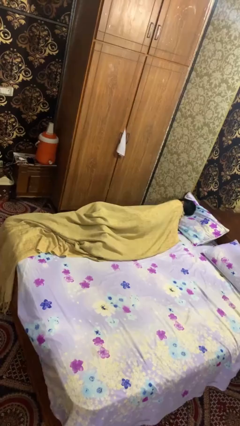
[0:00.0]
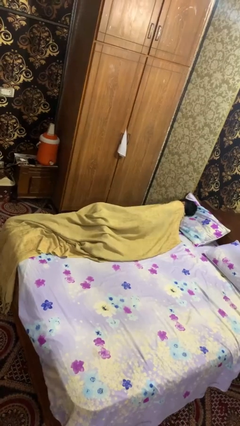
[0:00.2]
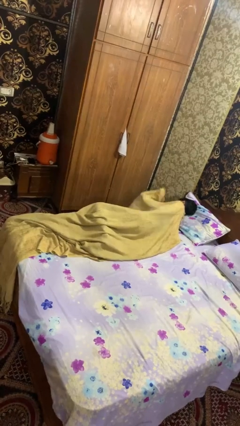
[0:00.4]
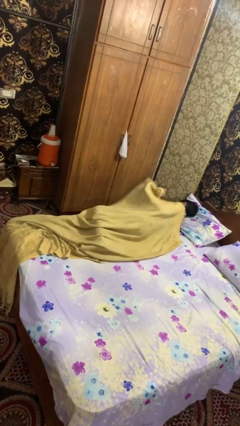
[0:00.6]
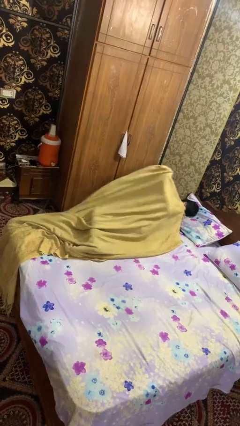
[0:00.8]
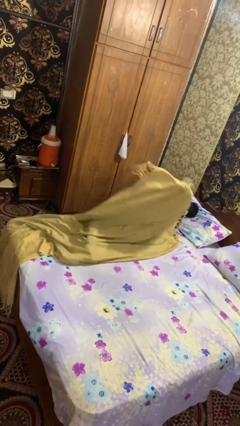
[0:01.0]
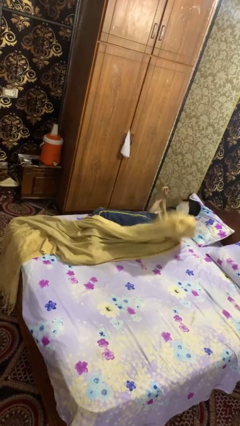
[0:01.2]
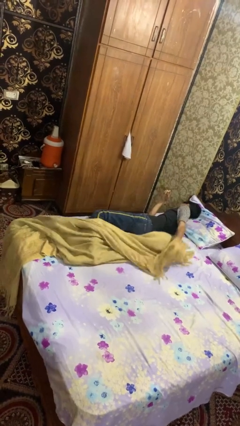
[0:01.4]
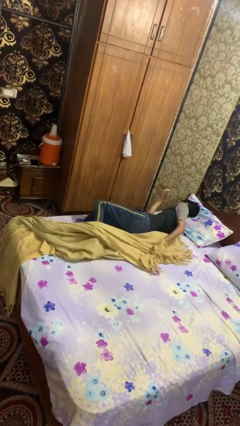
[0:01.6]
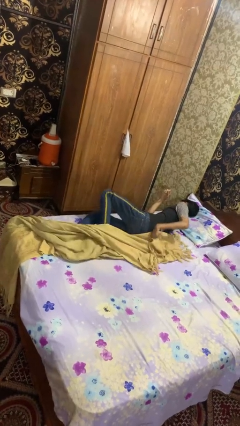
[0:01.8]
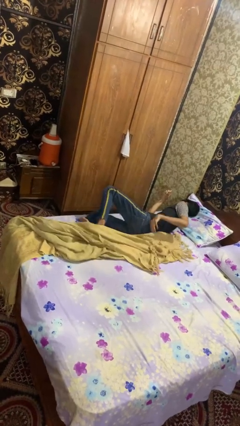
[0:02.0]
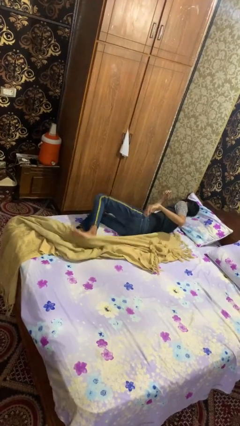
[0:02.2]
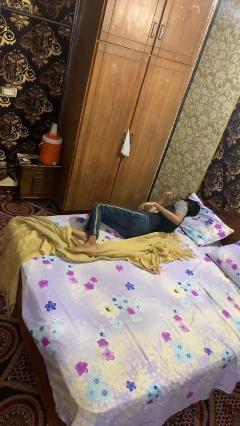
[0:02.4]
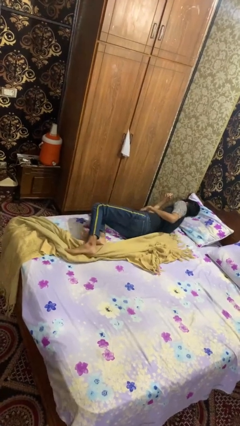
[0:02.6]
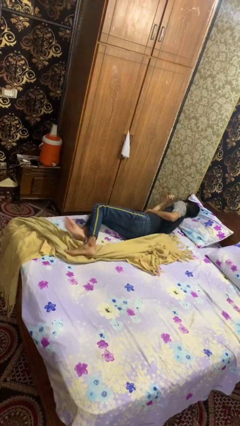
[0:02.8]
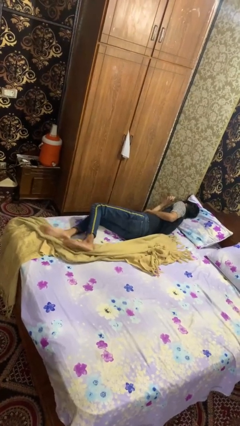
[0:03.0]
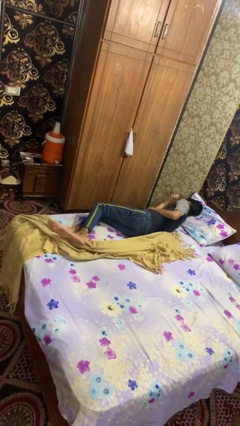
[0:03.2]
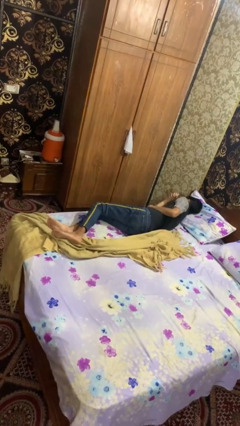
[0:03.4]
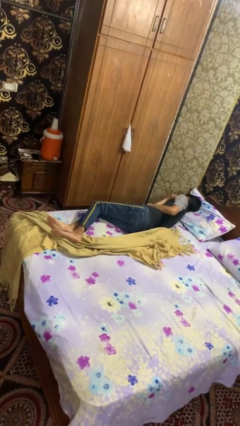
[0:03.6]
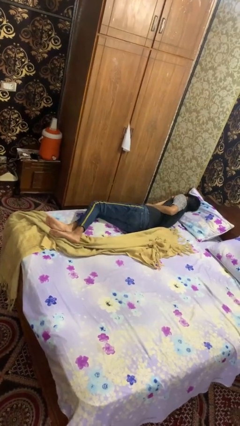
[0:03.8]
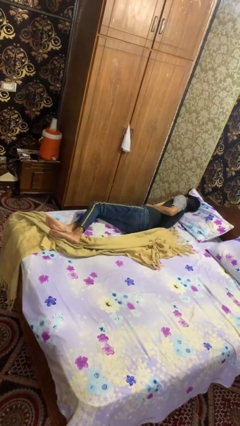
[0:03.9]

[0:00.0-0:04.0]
person uncovers with bedsheets

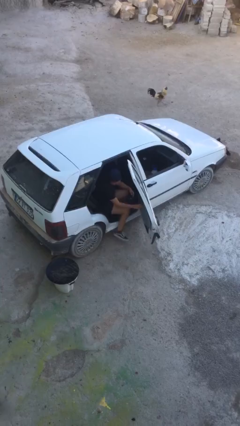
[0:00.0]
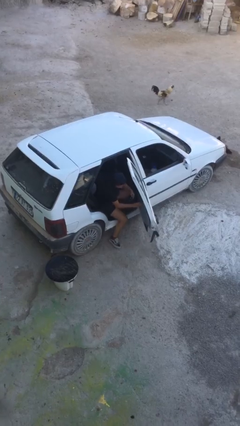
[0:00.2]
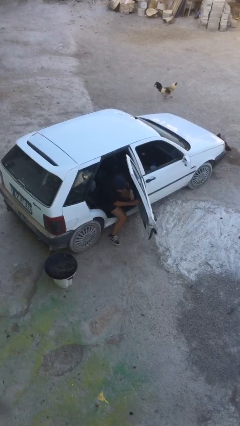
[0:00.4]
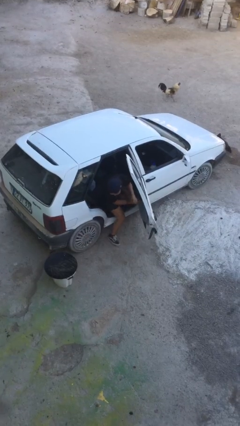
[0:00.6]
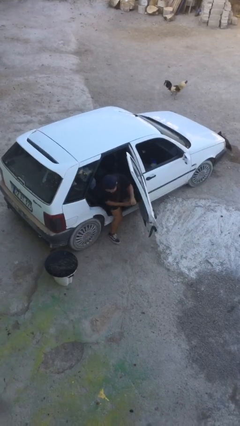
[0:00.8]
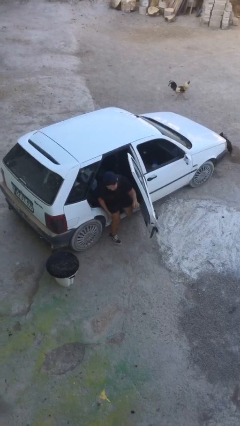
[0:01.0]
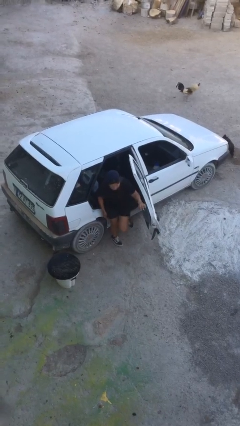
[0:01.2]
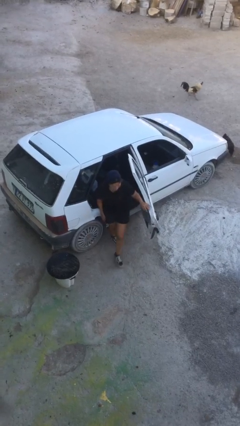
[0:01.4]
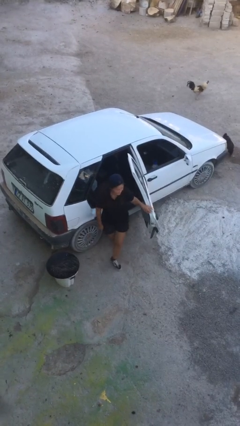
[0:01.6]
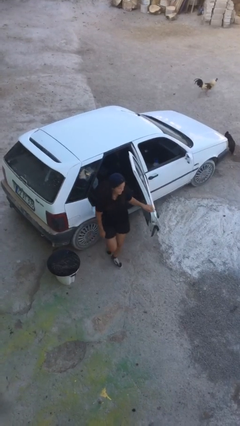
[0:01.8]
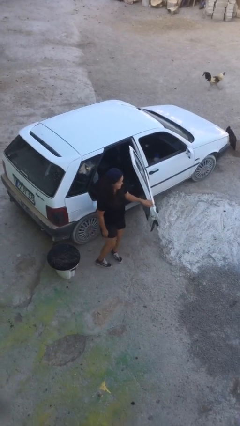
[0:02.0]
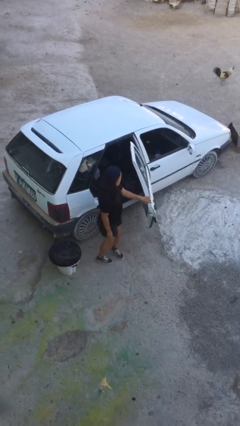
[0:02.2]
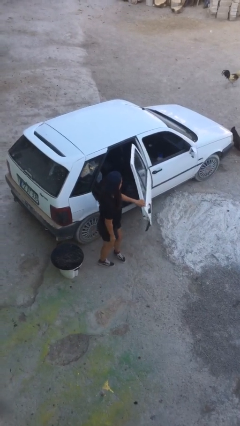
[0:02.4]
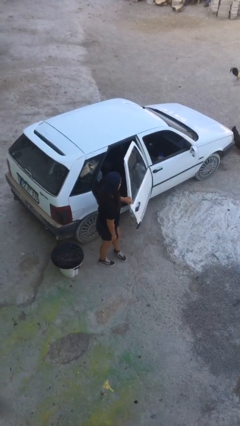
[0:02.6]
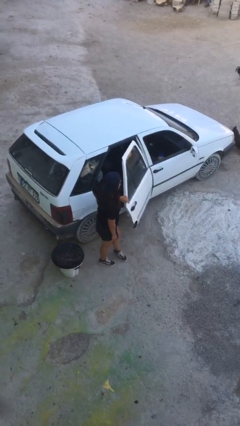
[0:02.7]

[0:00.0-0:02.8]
person exits car

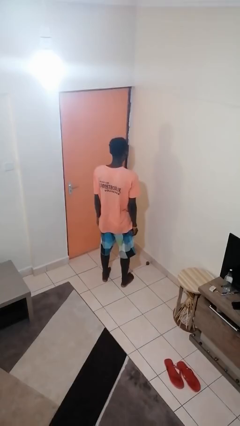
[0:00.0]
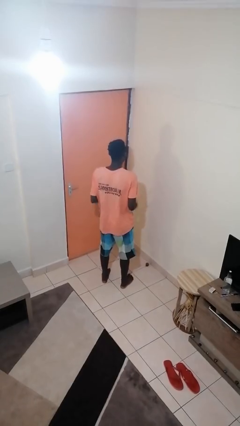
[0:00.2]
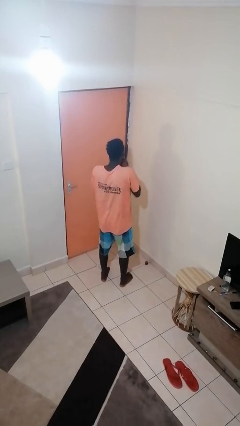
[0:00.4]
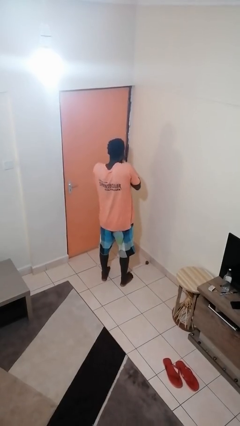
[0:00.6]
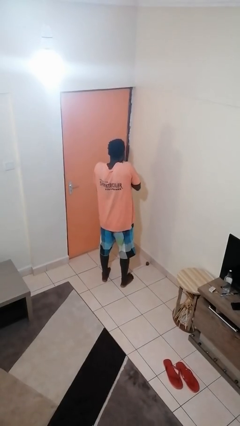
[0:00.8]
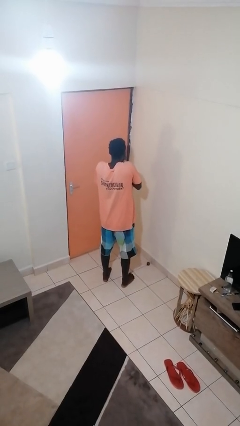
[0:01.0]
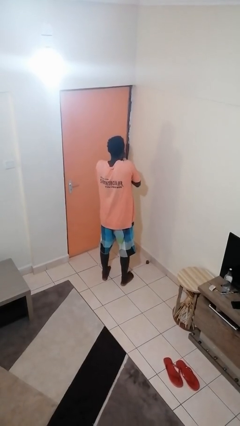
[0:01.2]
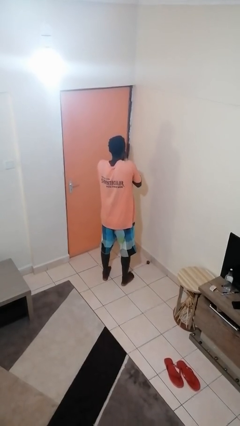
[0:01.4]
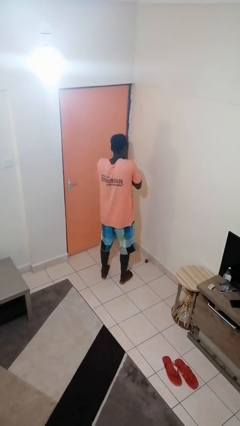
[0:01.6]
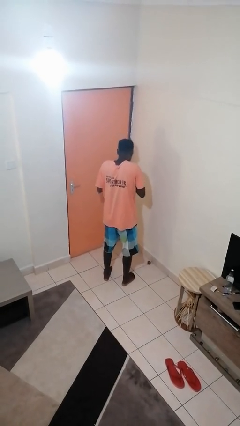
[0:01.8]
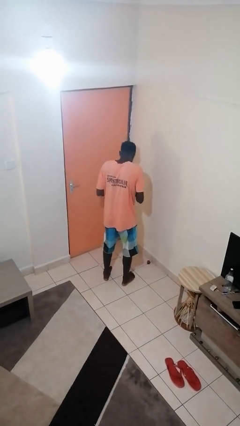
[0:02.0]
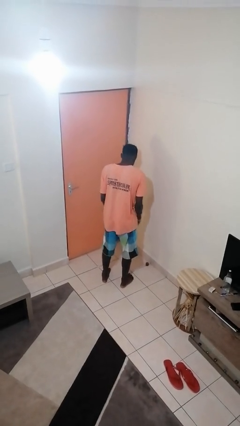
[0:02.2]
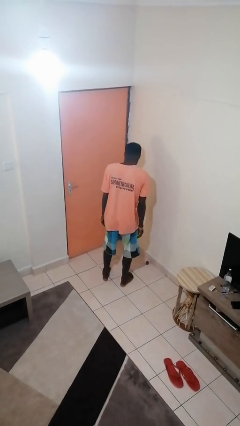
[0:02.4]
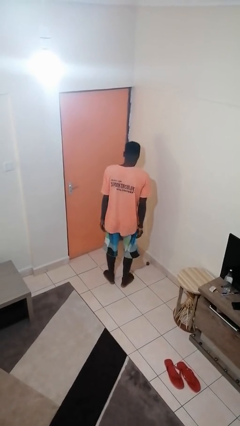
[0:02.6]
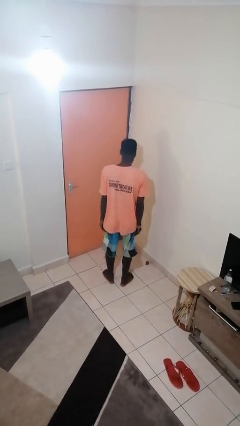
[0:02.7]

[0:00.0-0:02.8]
person yawns

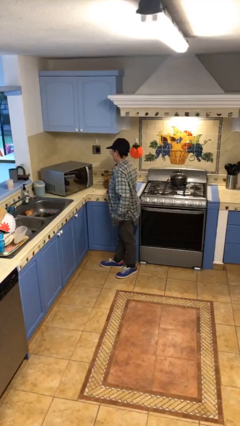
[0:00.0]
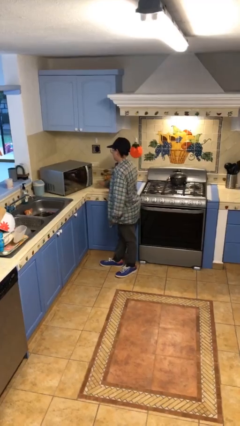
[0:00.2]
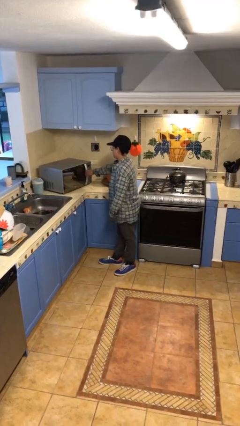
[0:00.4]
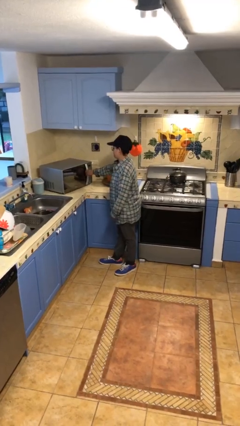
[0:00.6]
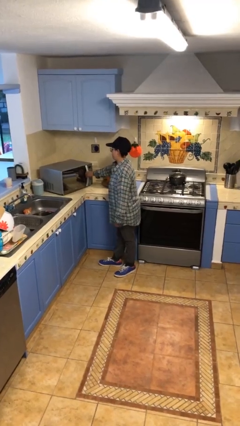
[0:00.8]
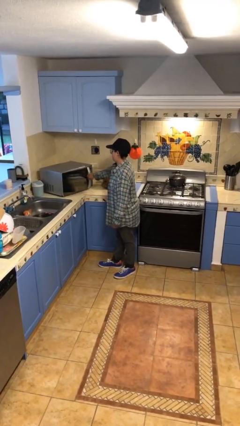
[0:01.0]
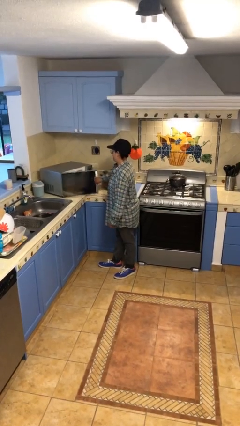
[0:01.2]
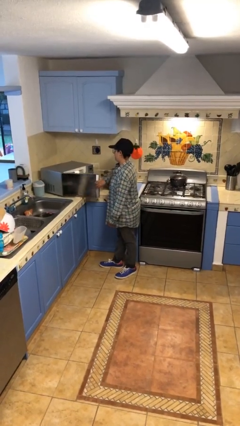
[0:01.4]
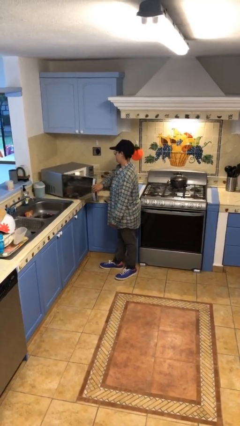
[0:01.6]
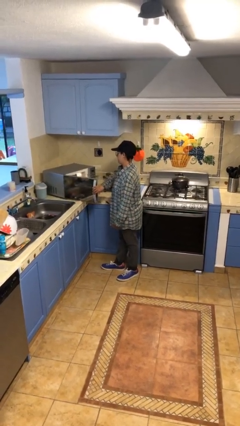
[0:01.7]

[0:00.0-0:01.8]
person opens microwave

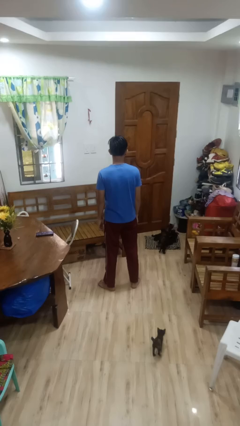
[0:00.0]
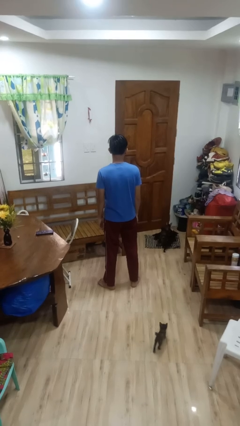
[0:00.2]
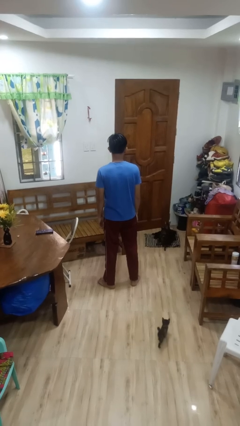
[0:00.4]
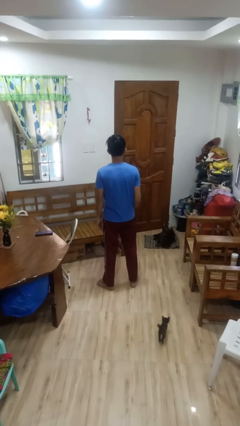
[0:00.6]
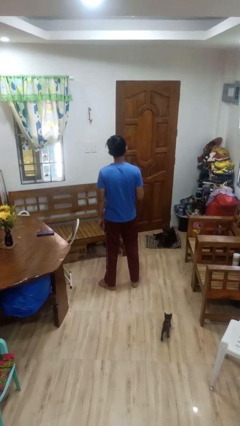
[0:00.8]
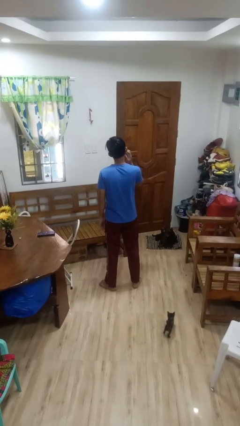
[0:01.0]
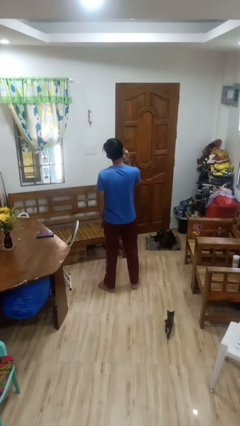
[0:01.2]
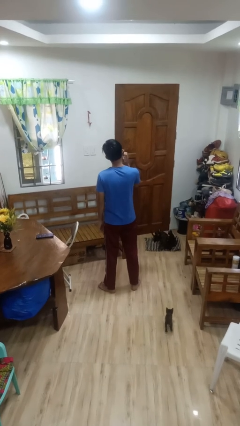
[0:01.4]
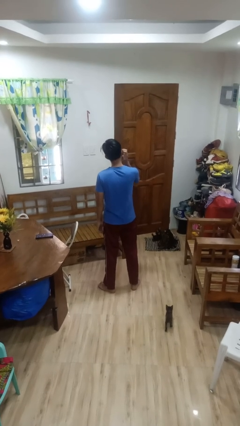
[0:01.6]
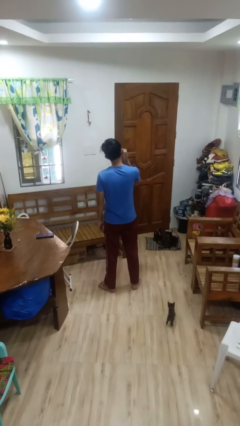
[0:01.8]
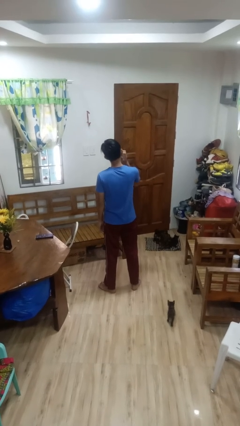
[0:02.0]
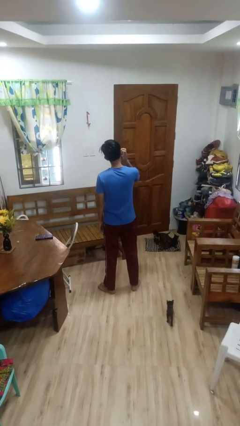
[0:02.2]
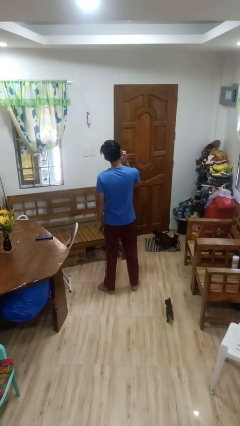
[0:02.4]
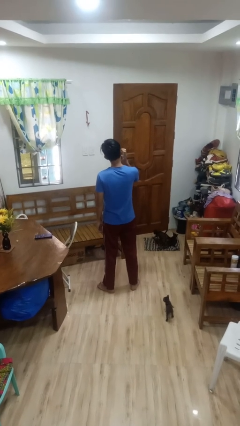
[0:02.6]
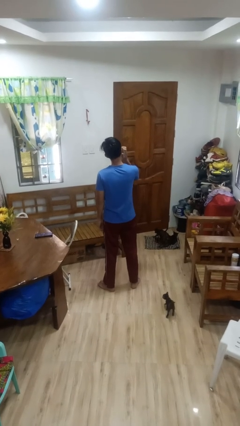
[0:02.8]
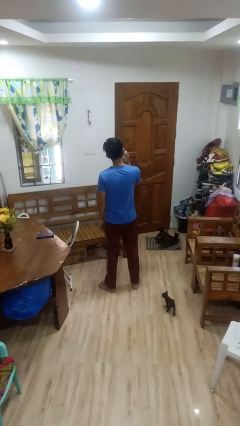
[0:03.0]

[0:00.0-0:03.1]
person scratches face

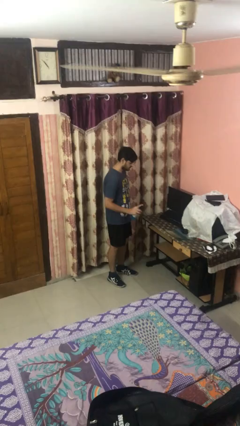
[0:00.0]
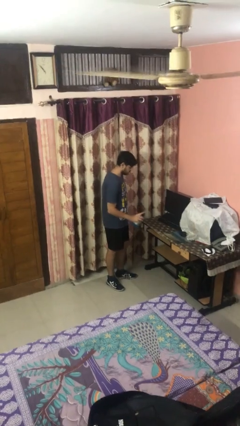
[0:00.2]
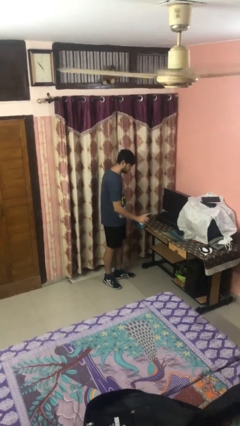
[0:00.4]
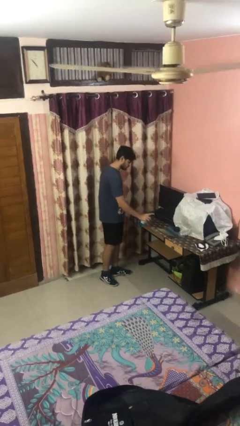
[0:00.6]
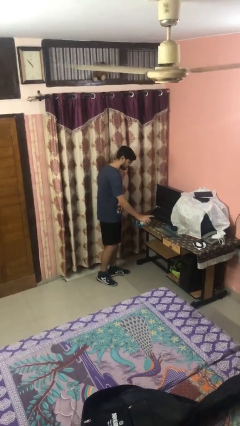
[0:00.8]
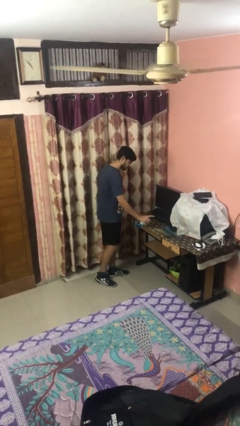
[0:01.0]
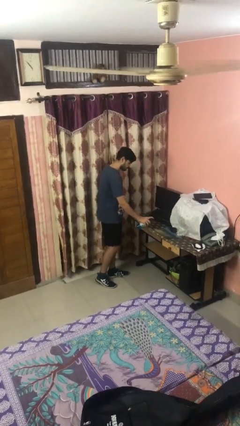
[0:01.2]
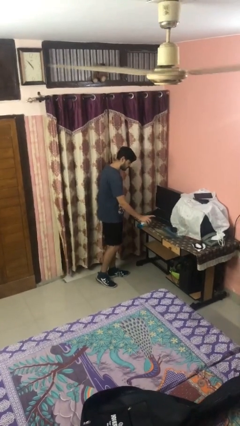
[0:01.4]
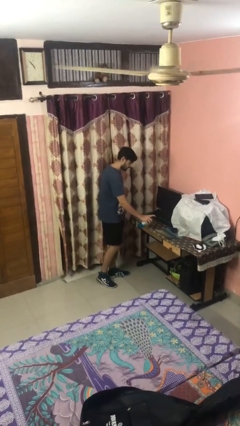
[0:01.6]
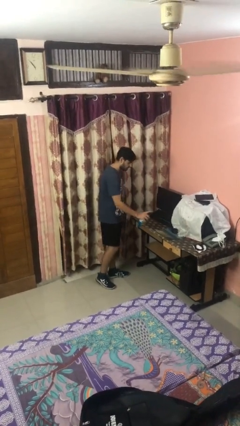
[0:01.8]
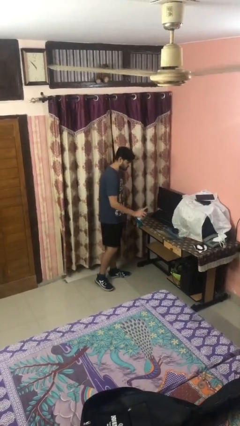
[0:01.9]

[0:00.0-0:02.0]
person sprays from bottle

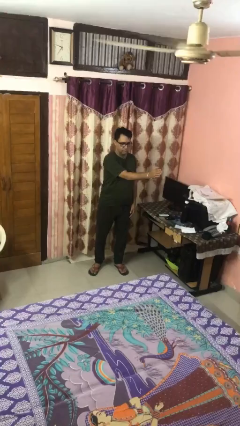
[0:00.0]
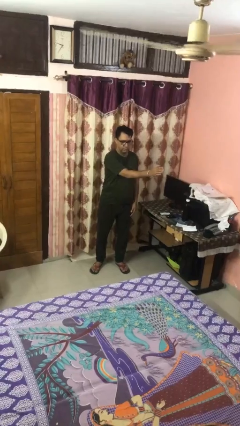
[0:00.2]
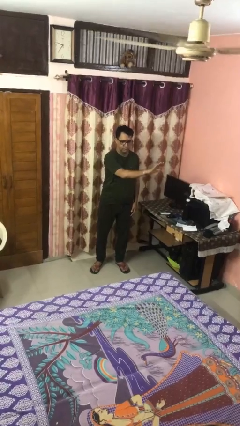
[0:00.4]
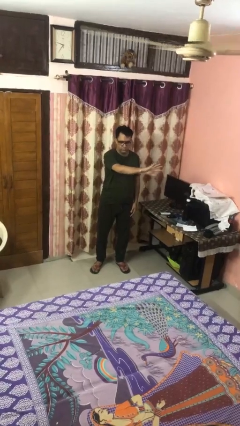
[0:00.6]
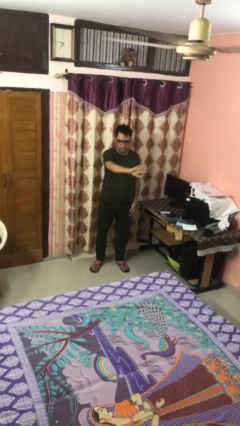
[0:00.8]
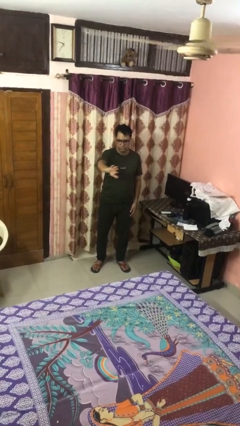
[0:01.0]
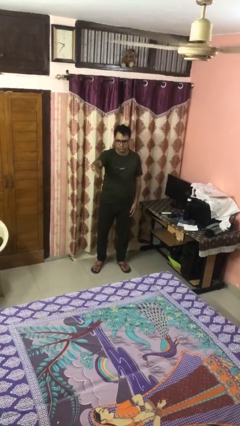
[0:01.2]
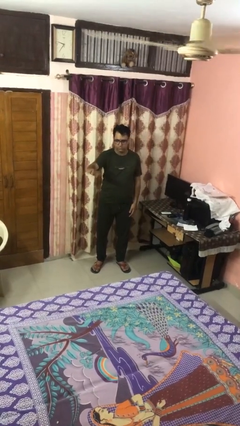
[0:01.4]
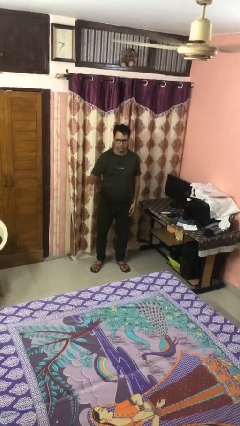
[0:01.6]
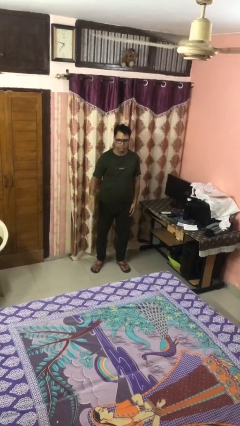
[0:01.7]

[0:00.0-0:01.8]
person gestures swipe right
